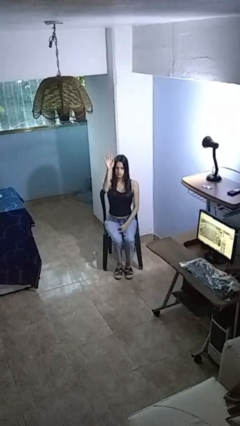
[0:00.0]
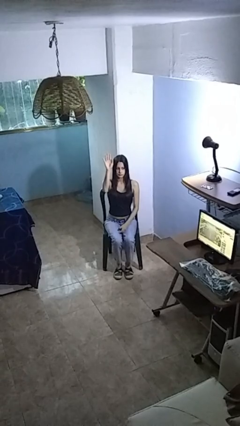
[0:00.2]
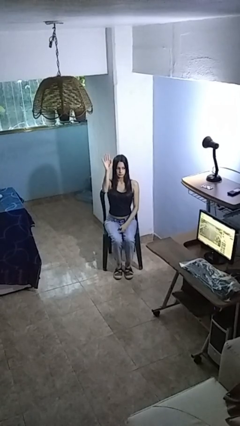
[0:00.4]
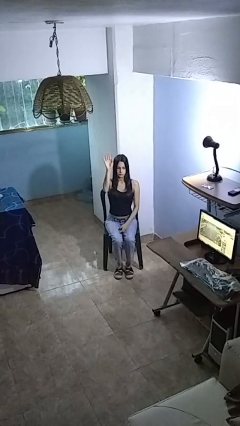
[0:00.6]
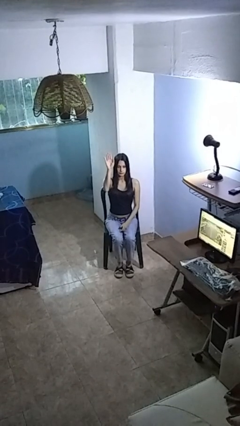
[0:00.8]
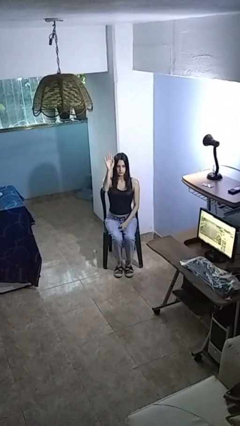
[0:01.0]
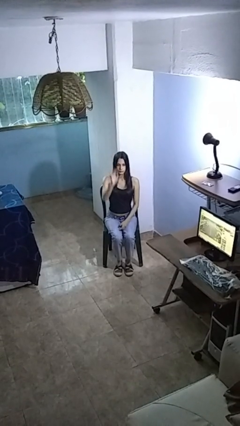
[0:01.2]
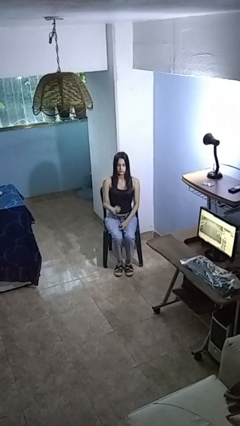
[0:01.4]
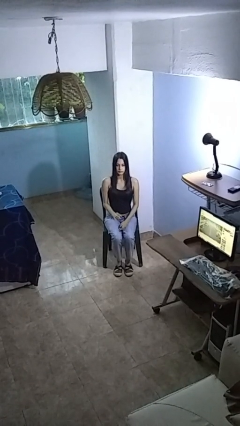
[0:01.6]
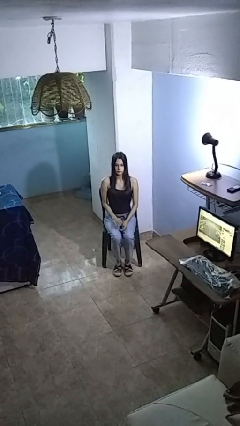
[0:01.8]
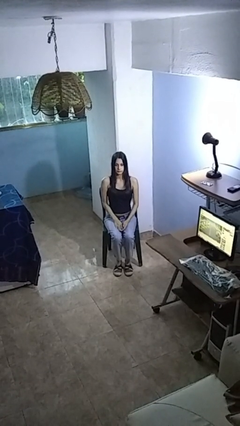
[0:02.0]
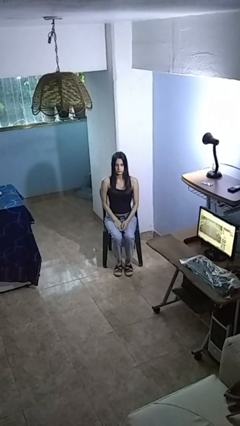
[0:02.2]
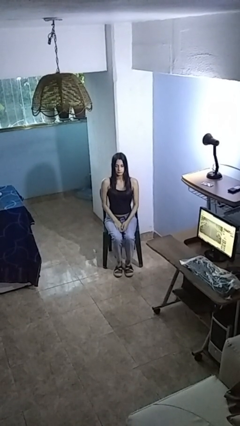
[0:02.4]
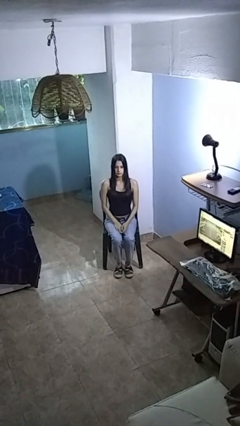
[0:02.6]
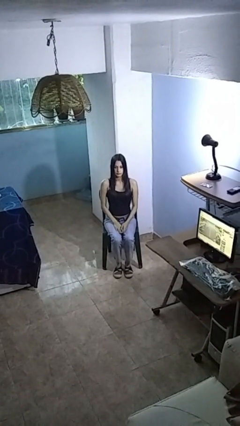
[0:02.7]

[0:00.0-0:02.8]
person gestures lower hand

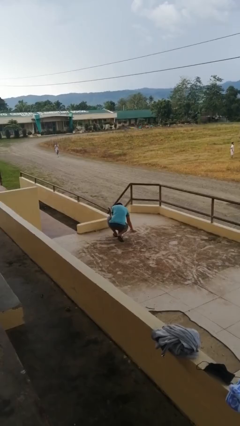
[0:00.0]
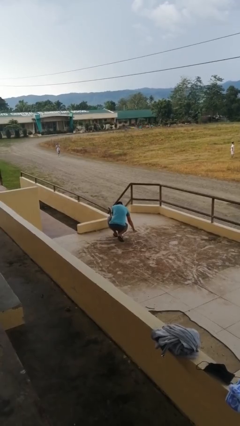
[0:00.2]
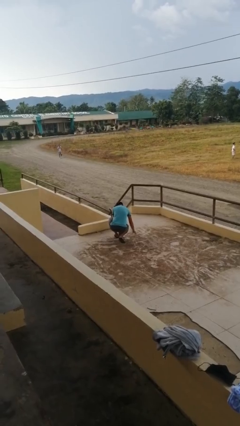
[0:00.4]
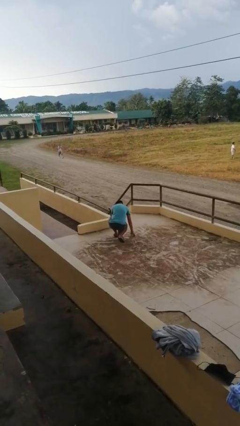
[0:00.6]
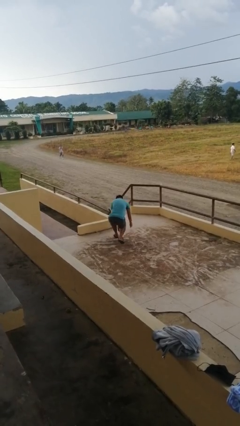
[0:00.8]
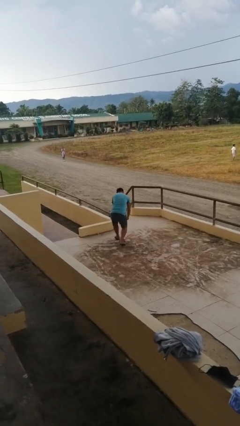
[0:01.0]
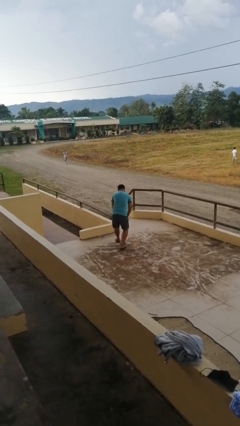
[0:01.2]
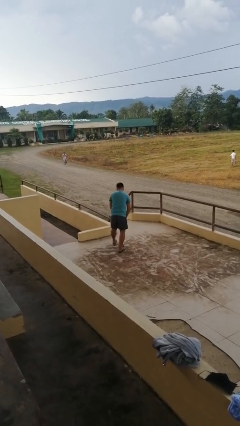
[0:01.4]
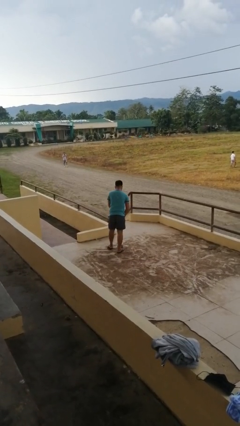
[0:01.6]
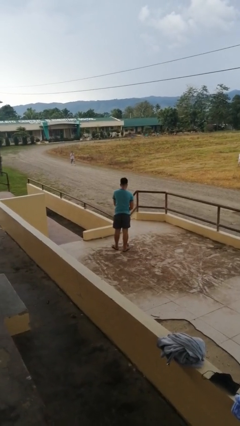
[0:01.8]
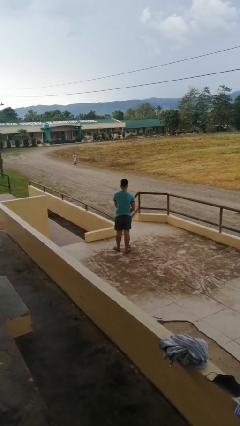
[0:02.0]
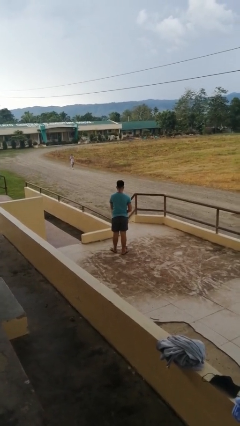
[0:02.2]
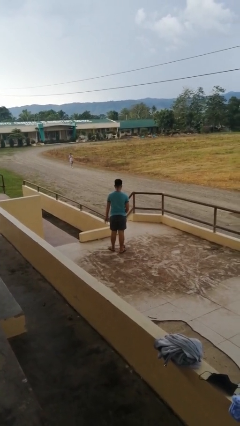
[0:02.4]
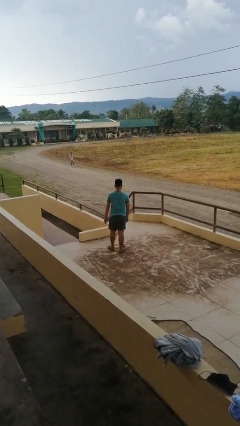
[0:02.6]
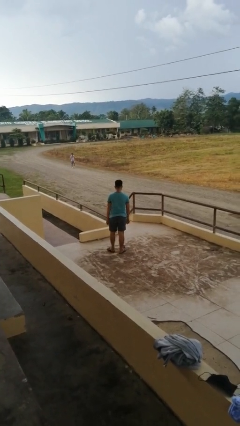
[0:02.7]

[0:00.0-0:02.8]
person stands up from floor

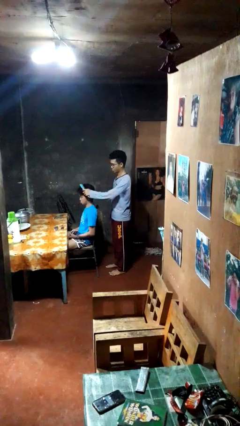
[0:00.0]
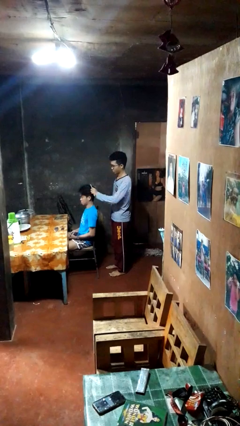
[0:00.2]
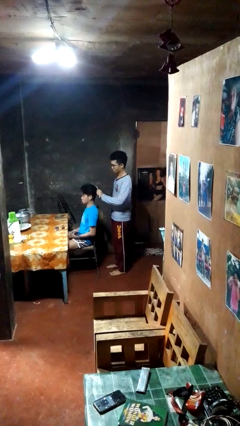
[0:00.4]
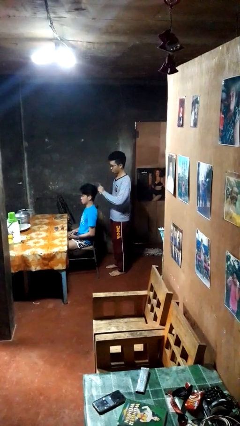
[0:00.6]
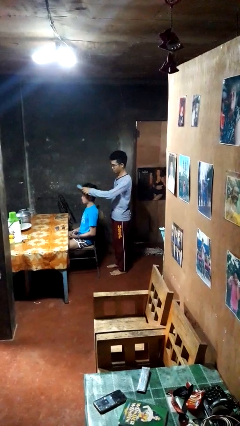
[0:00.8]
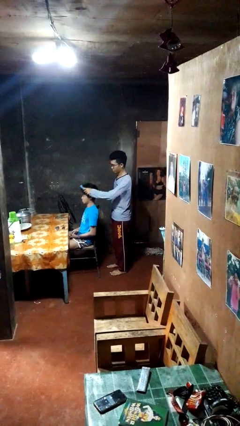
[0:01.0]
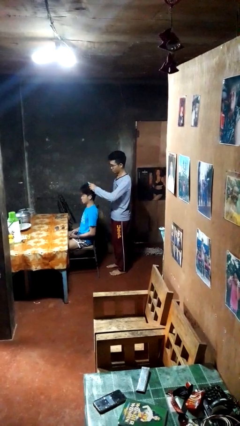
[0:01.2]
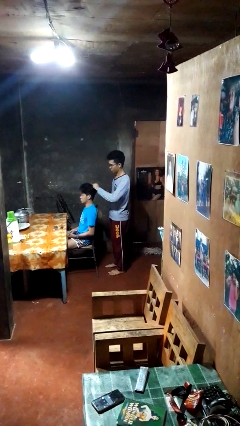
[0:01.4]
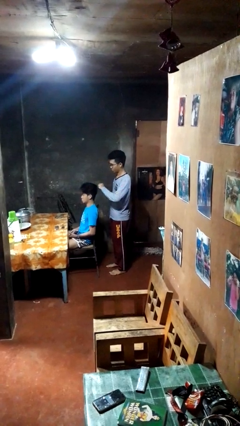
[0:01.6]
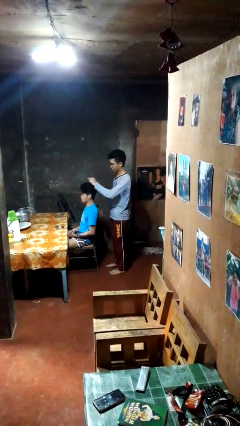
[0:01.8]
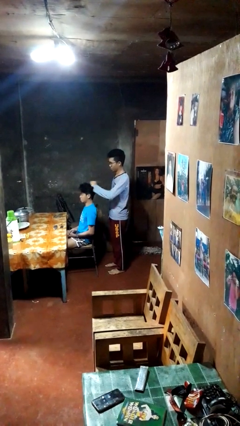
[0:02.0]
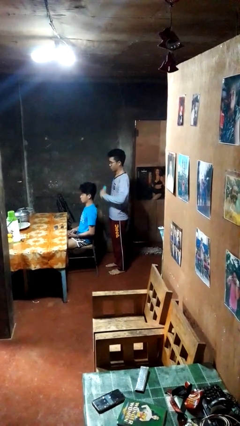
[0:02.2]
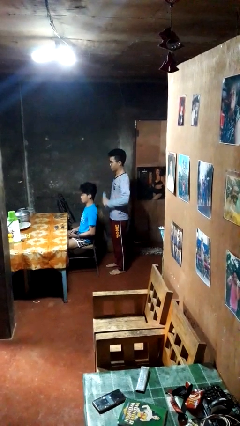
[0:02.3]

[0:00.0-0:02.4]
person brushes hair of person

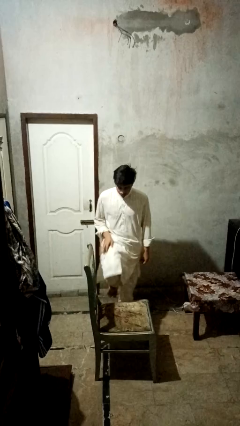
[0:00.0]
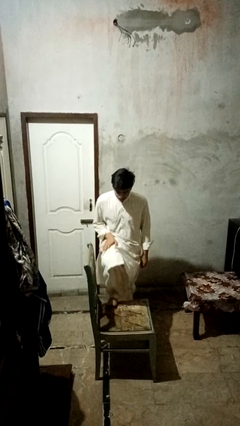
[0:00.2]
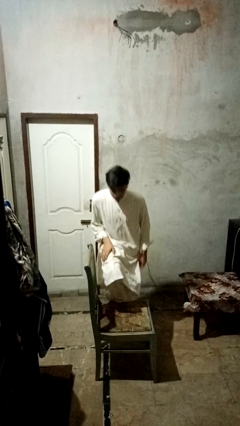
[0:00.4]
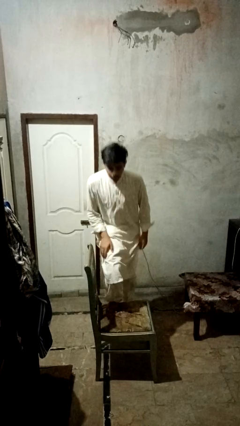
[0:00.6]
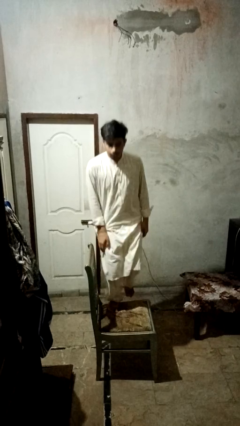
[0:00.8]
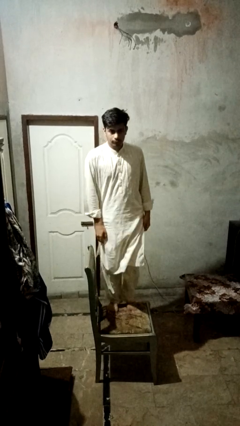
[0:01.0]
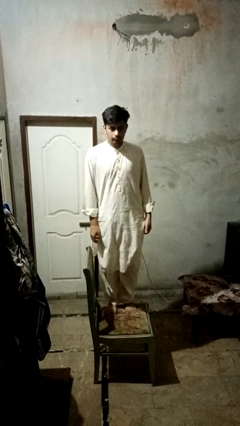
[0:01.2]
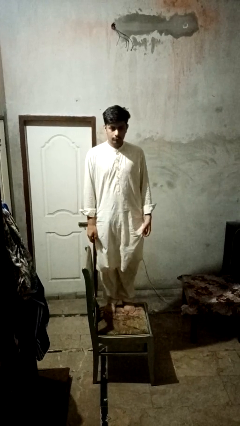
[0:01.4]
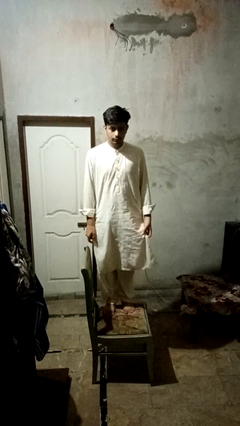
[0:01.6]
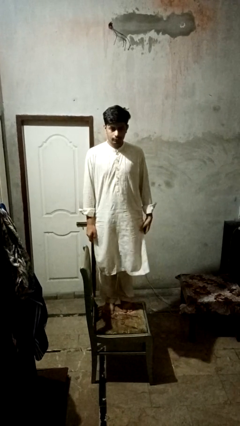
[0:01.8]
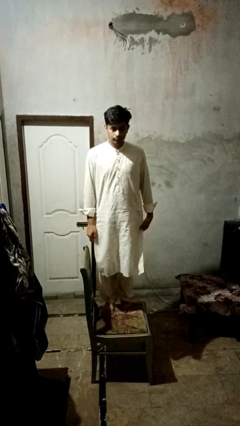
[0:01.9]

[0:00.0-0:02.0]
person climbs on chair

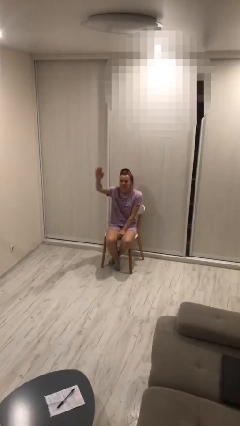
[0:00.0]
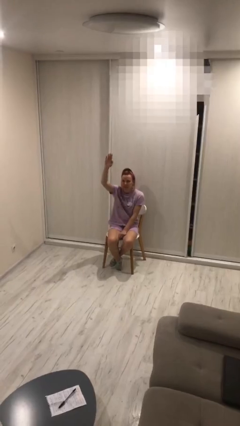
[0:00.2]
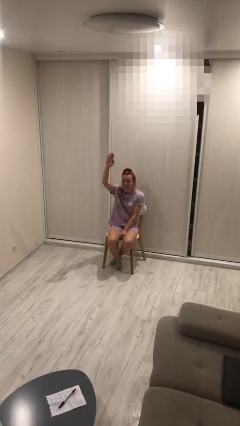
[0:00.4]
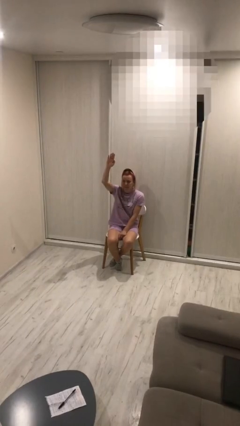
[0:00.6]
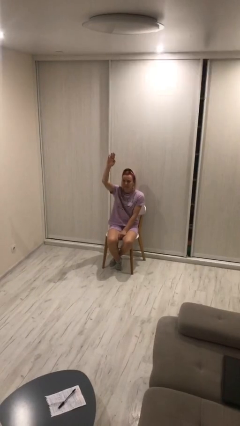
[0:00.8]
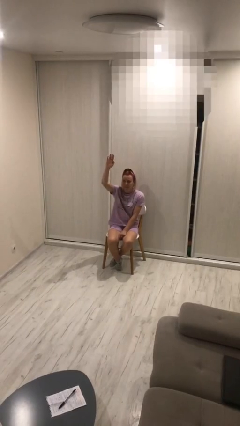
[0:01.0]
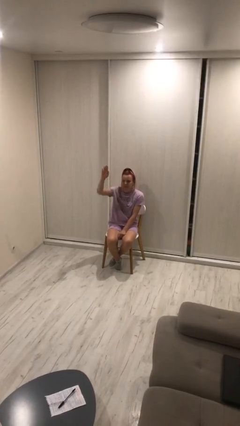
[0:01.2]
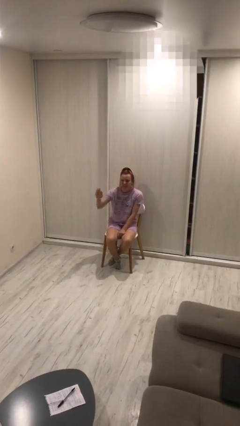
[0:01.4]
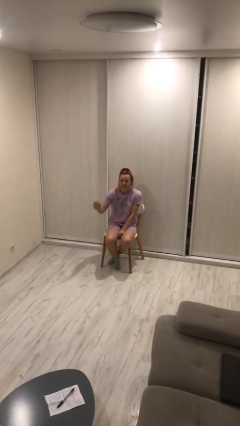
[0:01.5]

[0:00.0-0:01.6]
person gestures raise hand

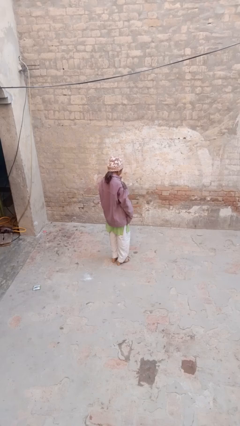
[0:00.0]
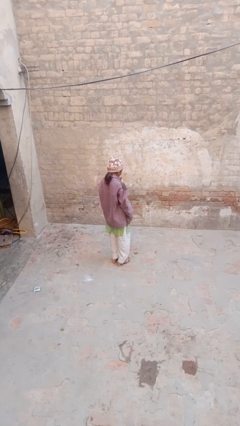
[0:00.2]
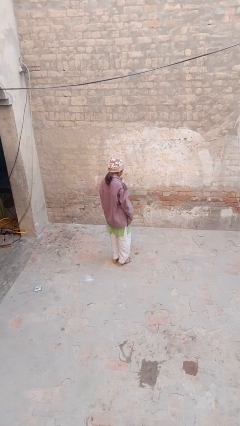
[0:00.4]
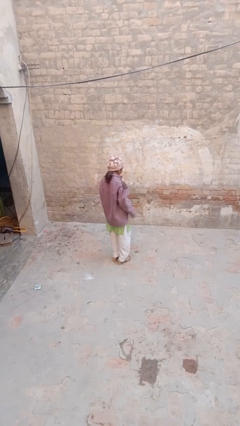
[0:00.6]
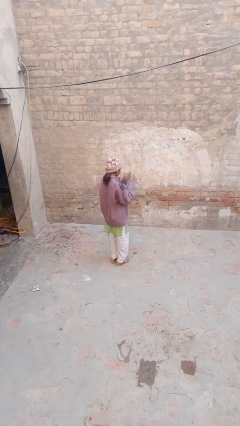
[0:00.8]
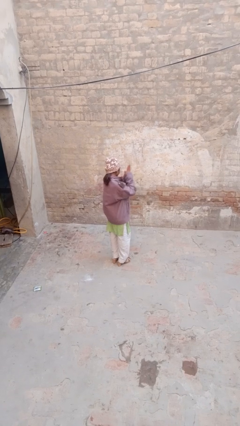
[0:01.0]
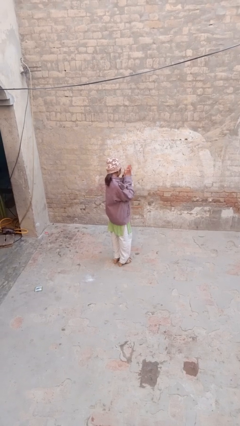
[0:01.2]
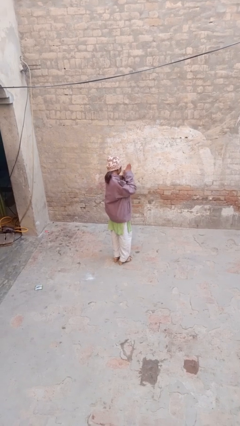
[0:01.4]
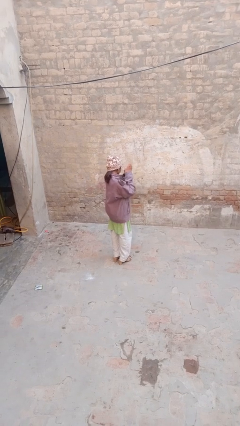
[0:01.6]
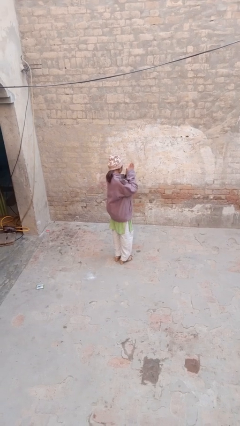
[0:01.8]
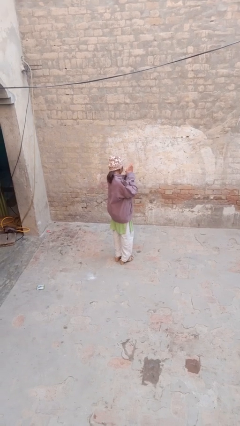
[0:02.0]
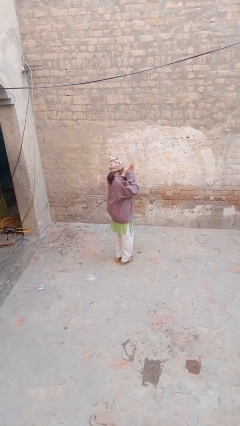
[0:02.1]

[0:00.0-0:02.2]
person blows into hands

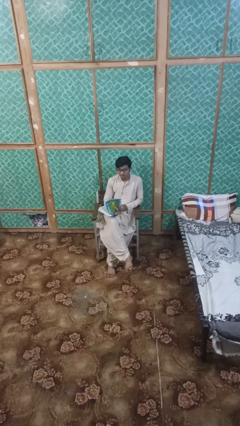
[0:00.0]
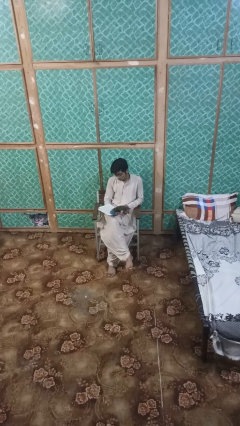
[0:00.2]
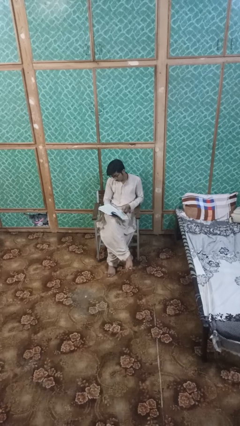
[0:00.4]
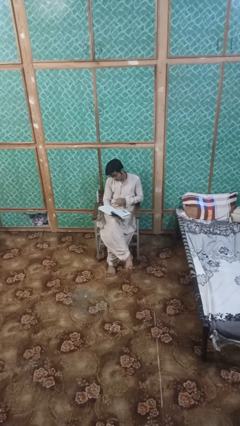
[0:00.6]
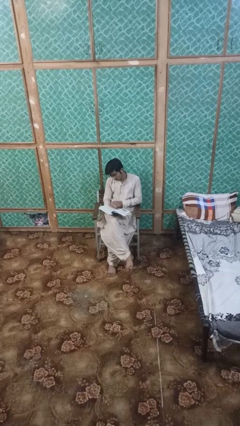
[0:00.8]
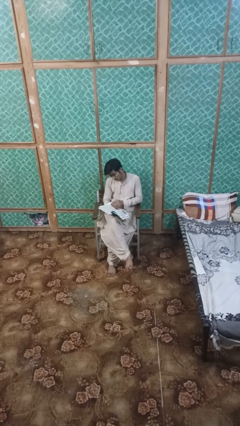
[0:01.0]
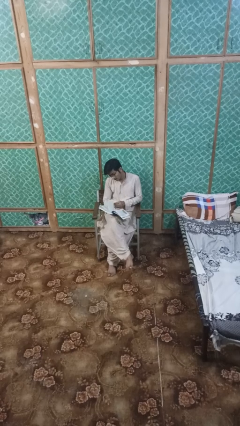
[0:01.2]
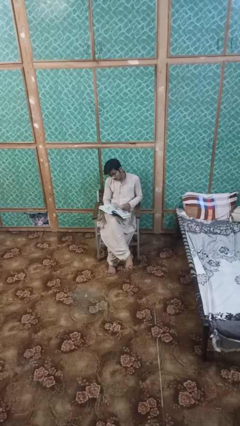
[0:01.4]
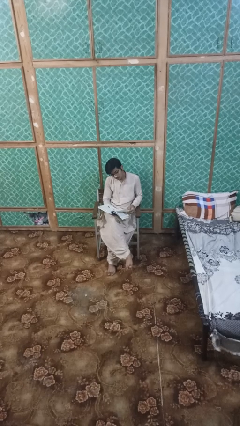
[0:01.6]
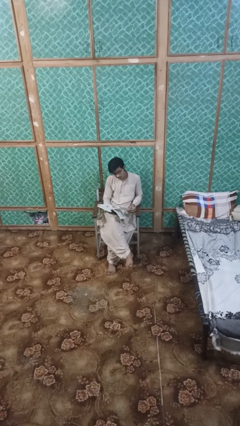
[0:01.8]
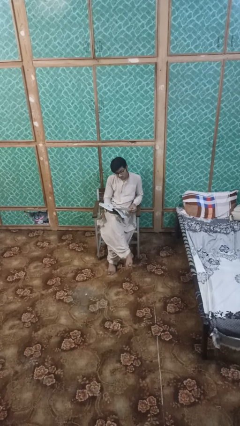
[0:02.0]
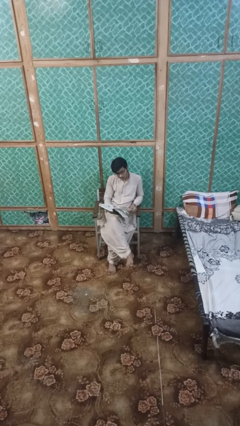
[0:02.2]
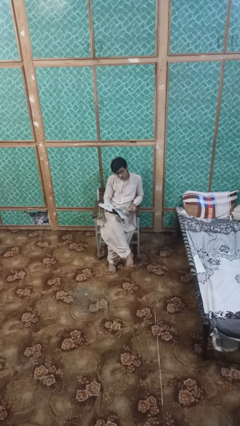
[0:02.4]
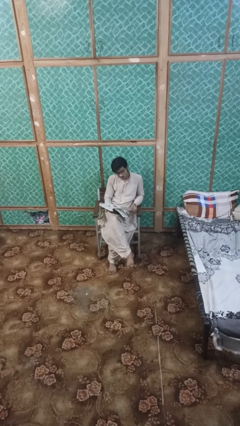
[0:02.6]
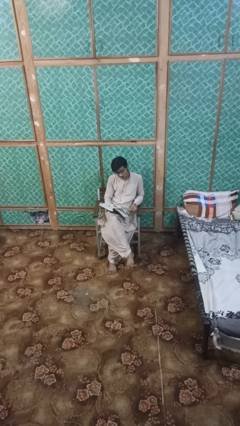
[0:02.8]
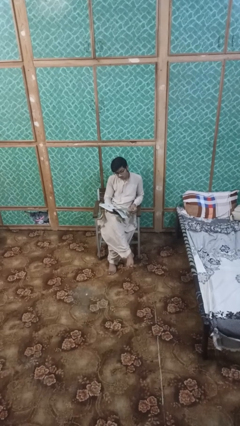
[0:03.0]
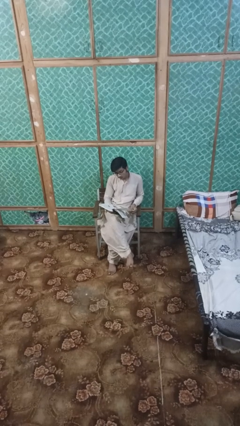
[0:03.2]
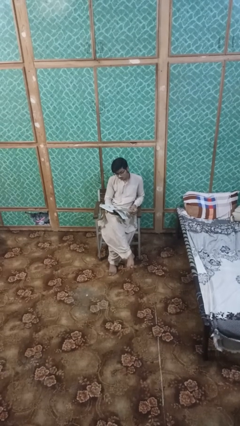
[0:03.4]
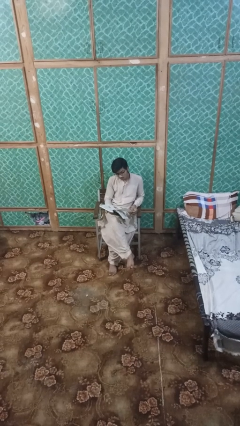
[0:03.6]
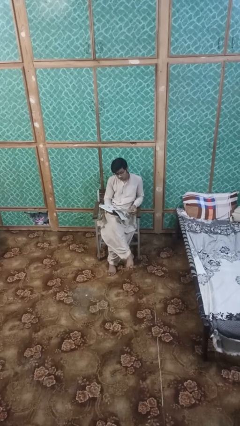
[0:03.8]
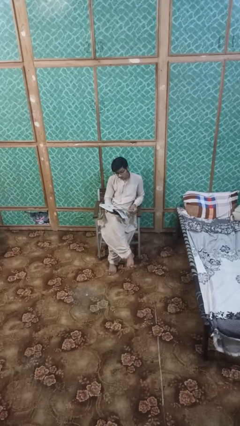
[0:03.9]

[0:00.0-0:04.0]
person reads book
